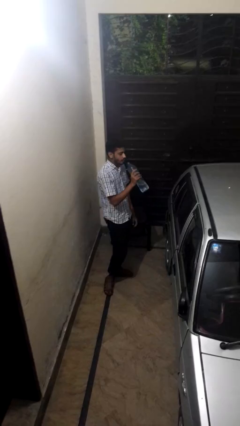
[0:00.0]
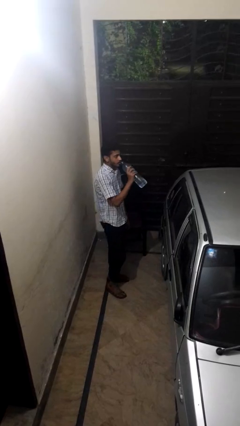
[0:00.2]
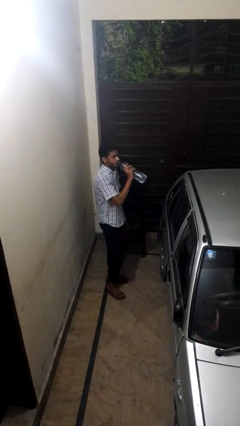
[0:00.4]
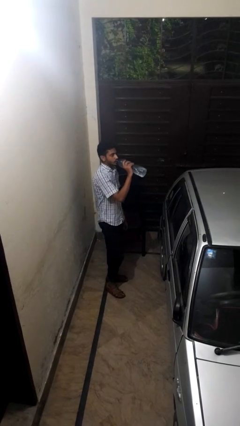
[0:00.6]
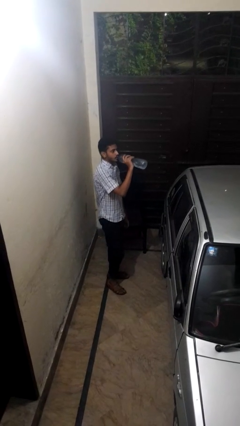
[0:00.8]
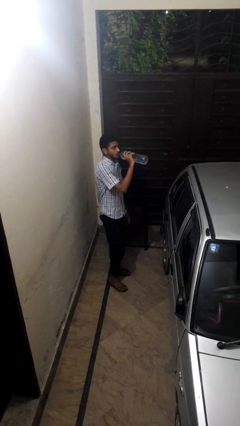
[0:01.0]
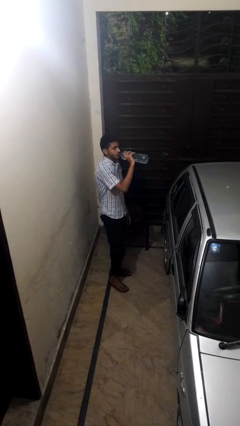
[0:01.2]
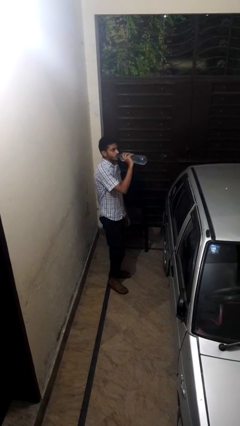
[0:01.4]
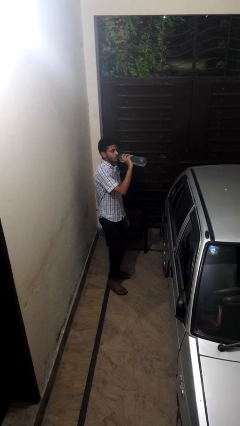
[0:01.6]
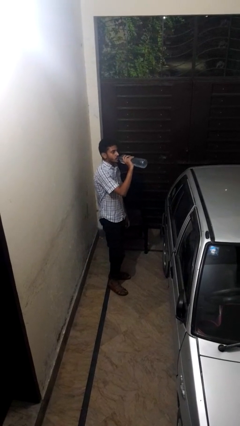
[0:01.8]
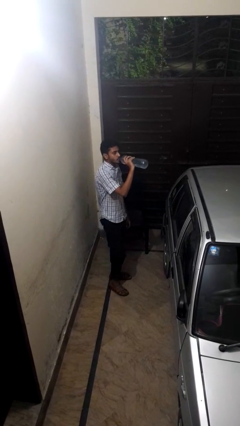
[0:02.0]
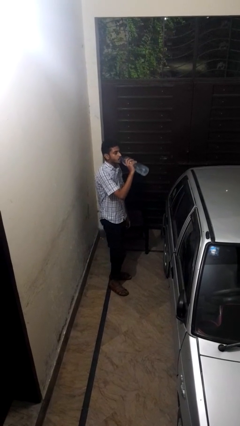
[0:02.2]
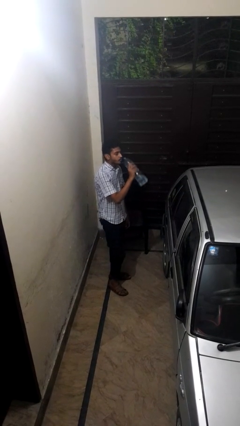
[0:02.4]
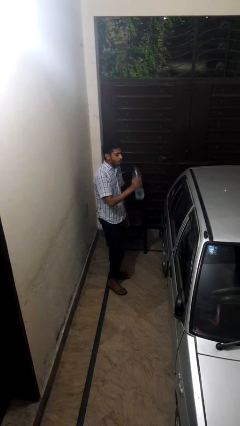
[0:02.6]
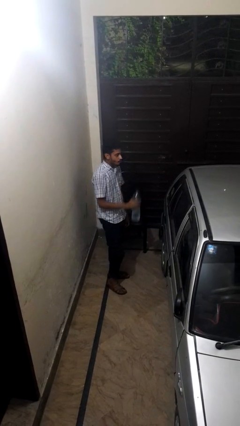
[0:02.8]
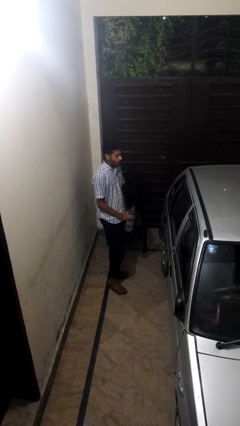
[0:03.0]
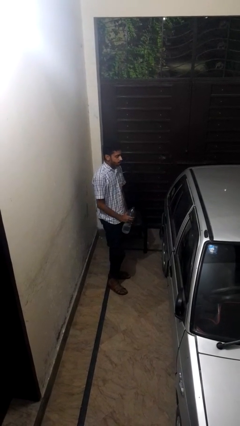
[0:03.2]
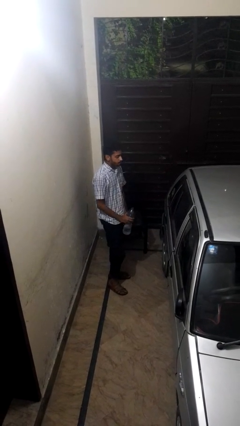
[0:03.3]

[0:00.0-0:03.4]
person drinks from bottle

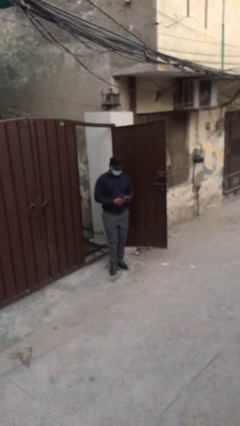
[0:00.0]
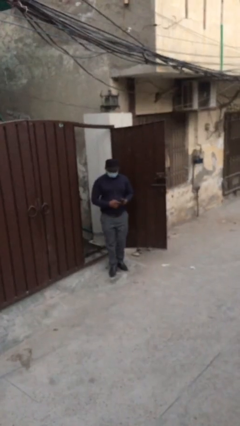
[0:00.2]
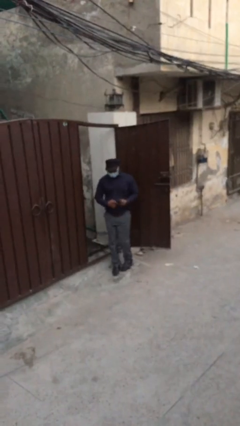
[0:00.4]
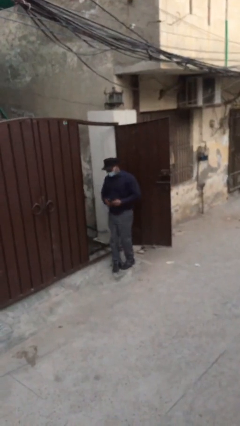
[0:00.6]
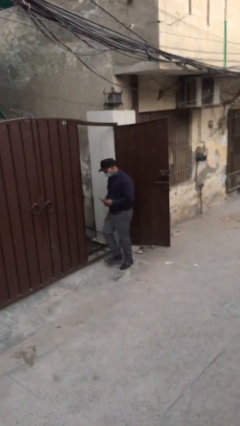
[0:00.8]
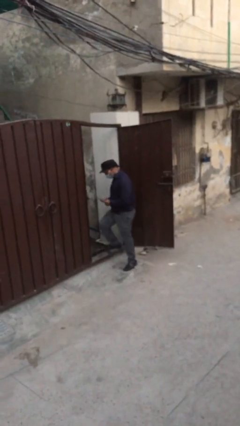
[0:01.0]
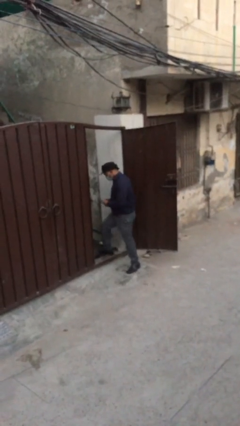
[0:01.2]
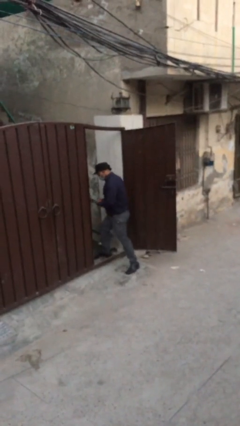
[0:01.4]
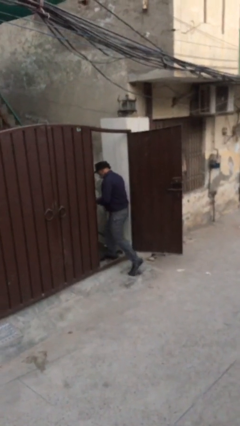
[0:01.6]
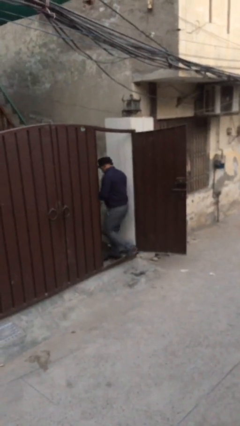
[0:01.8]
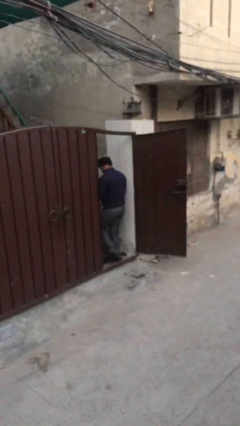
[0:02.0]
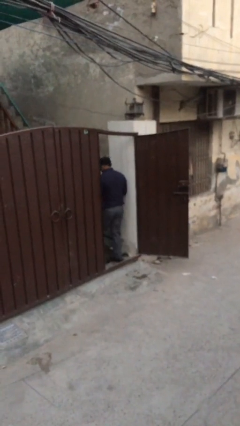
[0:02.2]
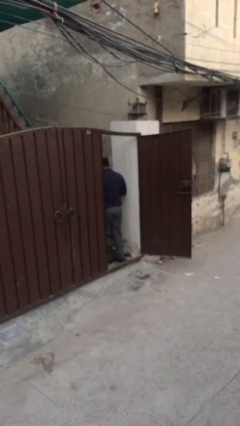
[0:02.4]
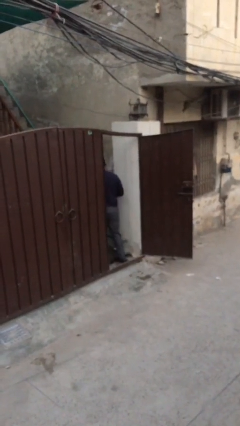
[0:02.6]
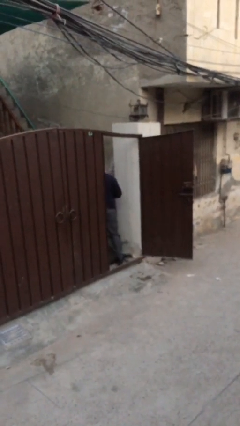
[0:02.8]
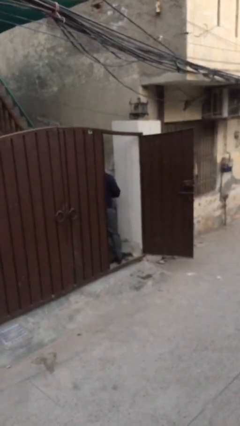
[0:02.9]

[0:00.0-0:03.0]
person exits scene through structure

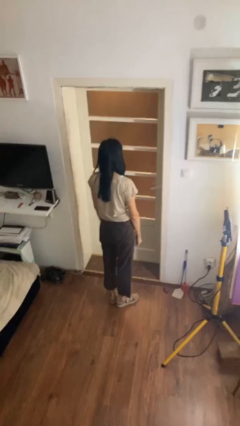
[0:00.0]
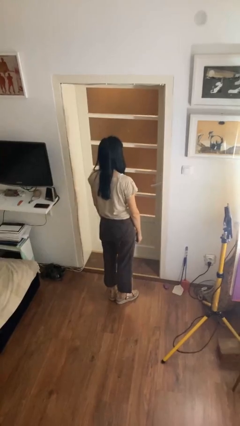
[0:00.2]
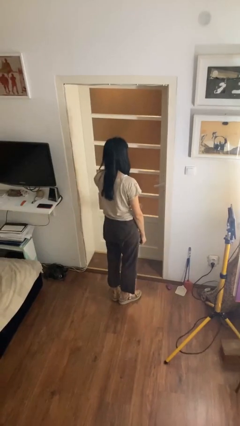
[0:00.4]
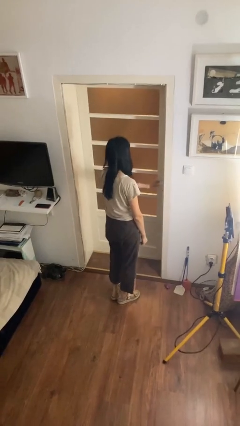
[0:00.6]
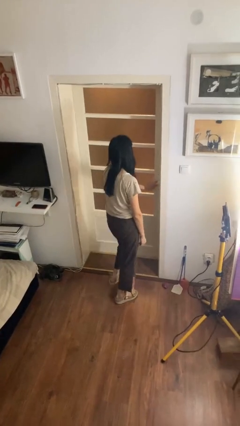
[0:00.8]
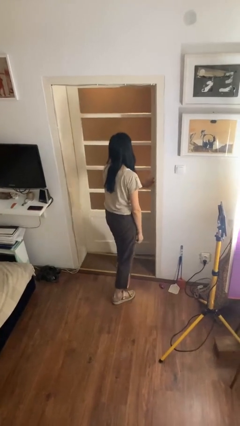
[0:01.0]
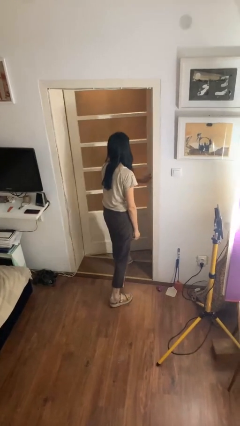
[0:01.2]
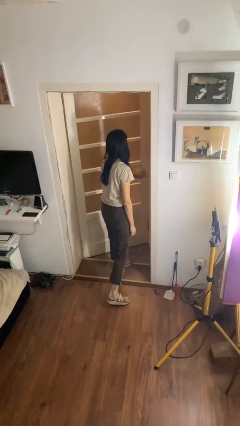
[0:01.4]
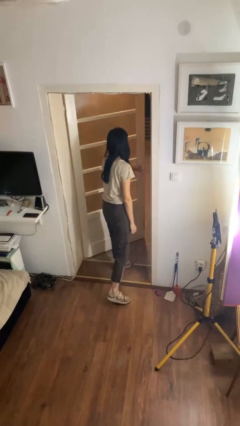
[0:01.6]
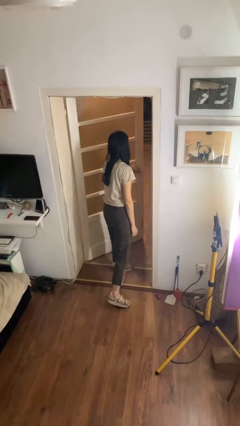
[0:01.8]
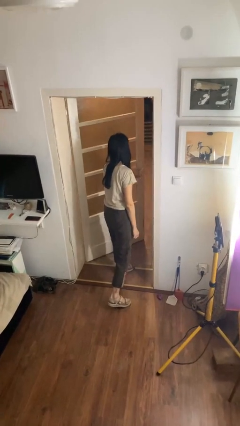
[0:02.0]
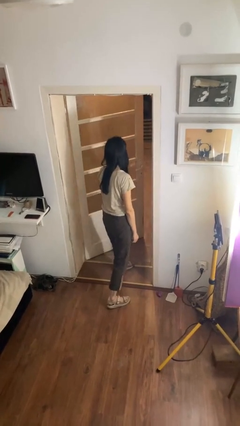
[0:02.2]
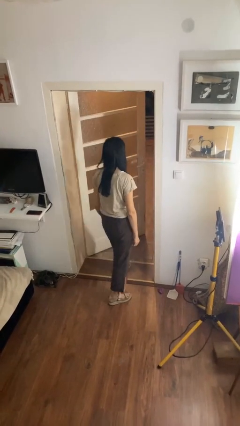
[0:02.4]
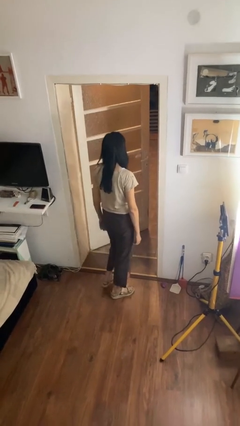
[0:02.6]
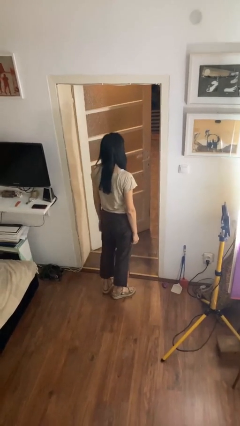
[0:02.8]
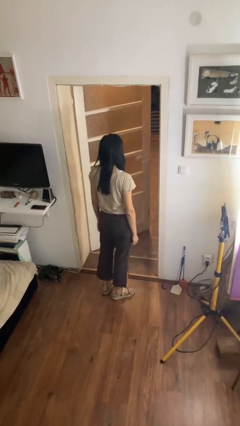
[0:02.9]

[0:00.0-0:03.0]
person opens facility door

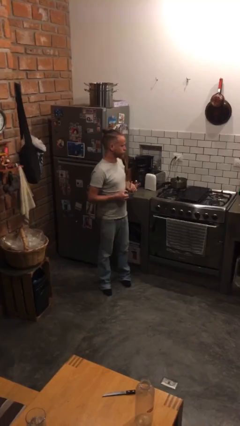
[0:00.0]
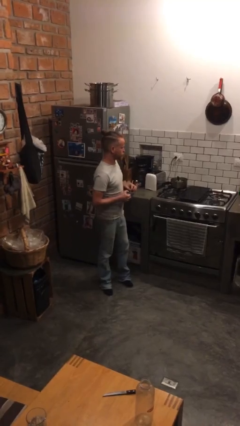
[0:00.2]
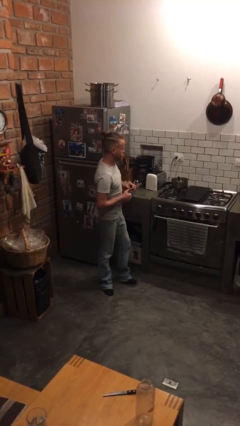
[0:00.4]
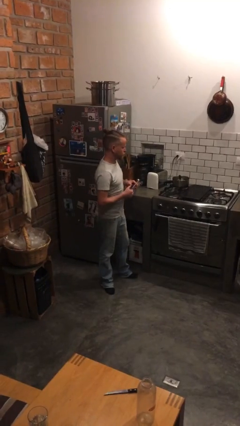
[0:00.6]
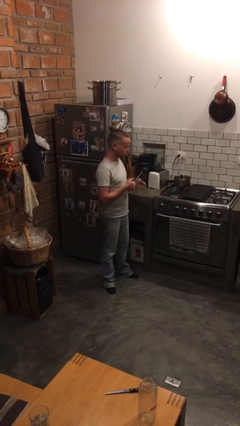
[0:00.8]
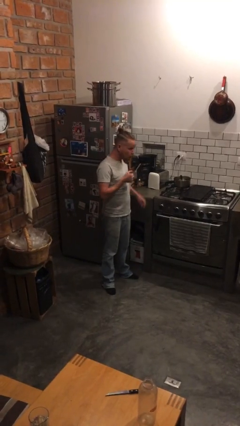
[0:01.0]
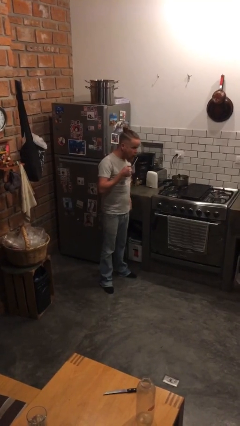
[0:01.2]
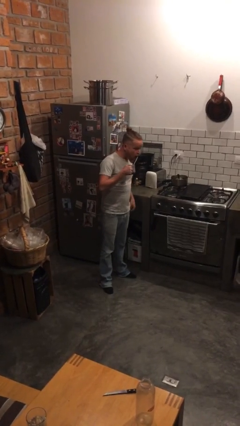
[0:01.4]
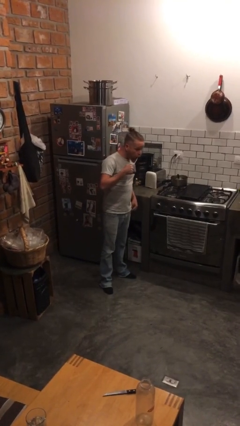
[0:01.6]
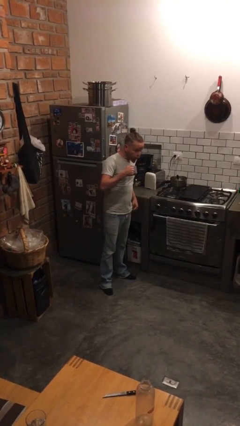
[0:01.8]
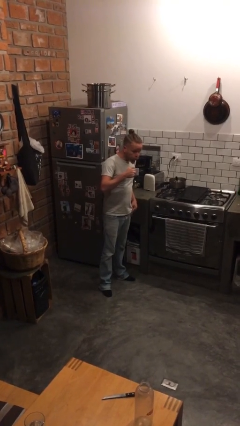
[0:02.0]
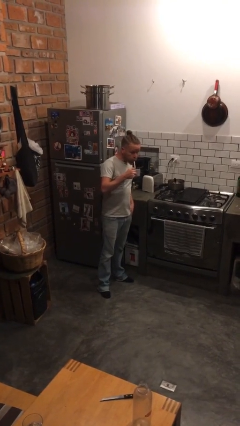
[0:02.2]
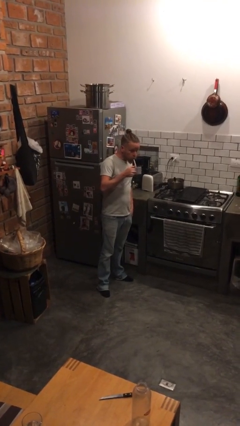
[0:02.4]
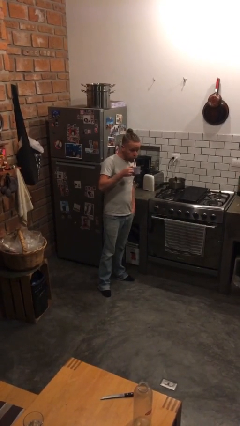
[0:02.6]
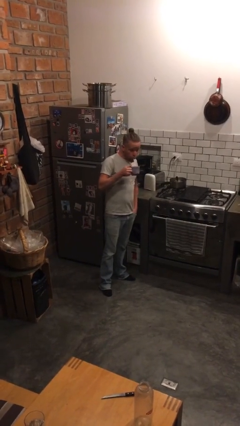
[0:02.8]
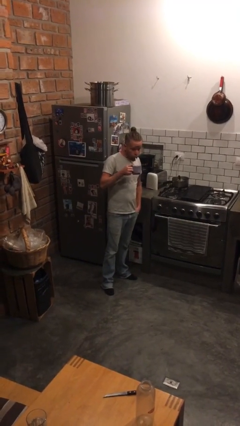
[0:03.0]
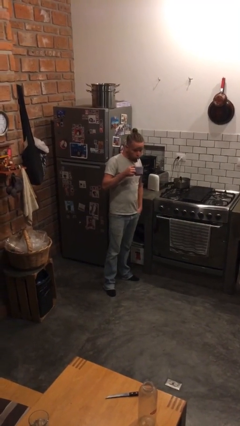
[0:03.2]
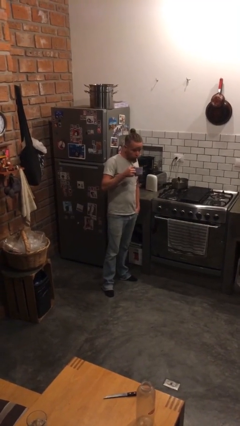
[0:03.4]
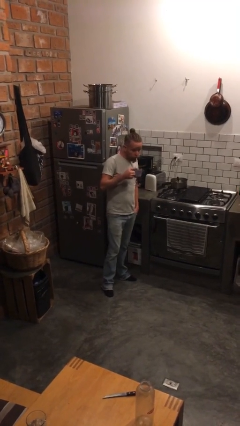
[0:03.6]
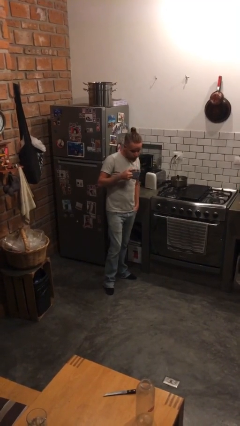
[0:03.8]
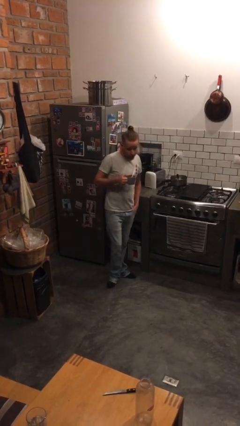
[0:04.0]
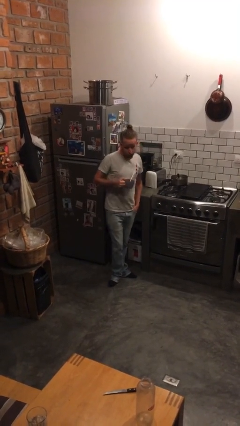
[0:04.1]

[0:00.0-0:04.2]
person drinks from straw

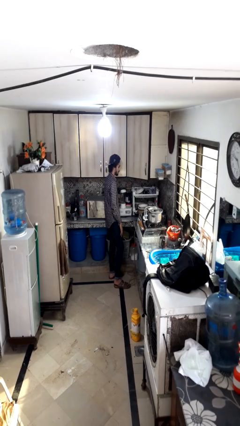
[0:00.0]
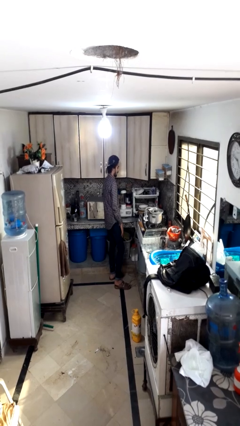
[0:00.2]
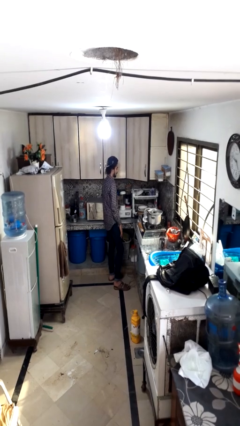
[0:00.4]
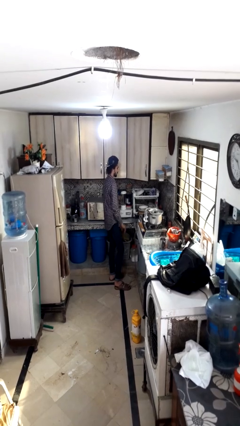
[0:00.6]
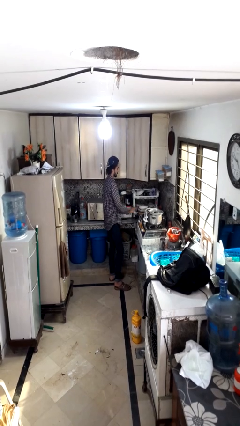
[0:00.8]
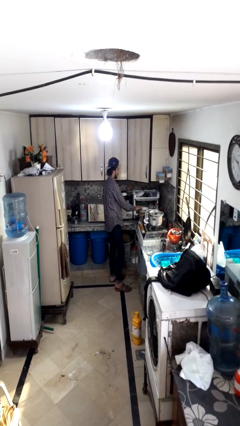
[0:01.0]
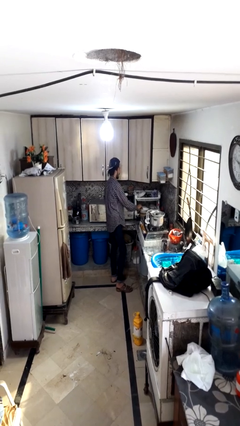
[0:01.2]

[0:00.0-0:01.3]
person loads dishwasher

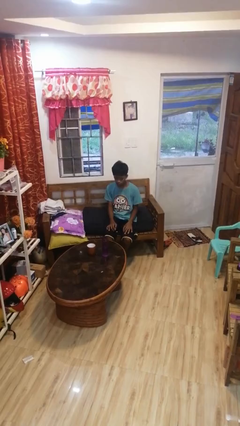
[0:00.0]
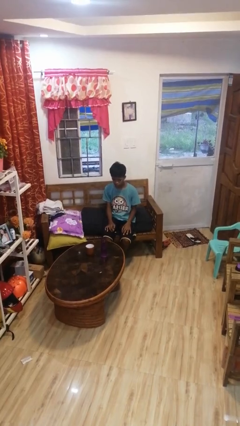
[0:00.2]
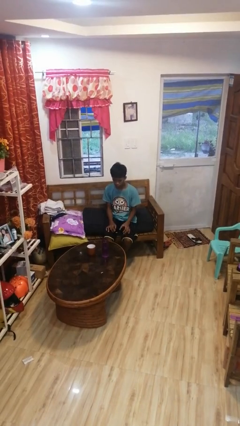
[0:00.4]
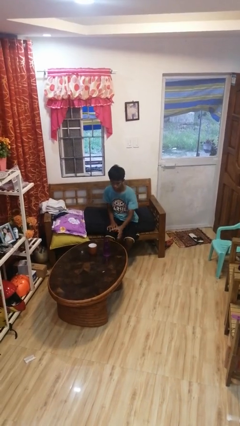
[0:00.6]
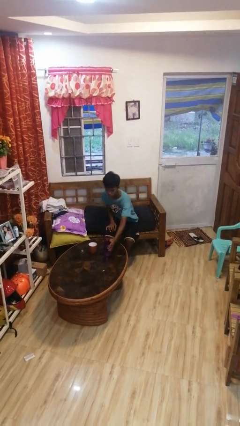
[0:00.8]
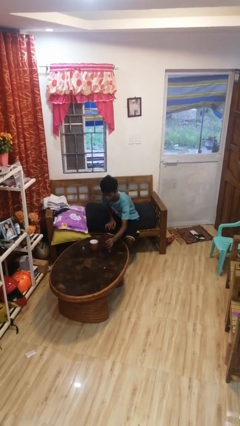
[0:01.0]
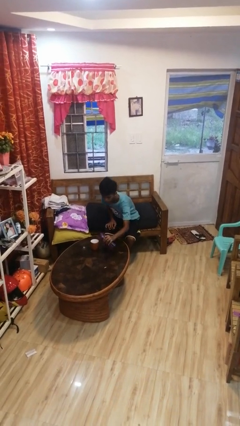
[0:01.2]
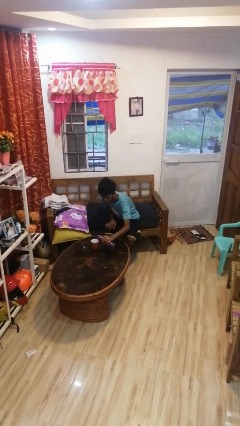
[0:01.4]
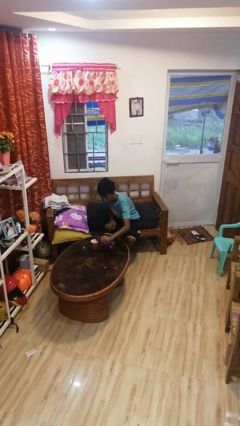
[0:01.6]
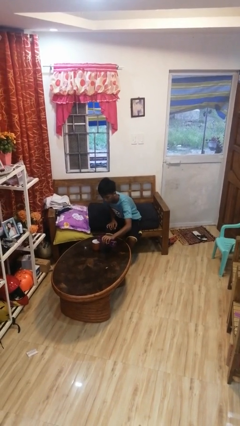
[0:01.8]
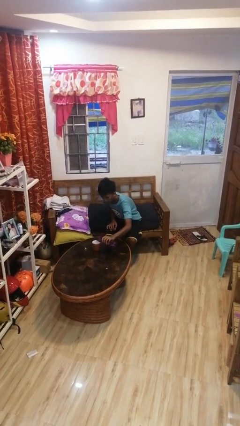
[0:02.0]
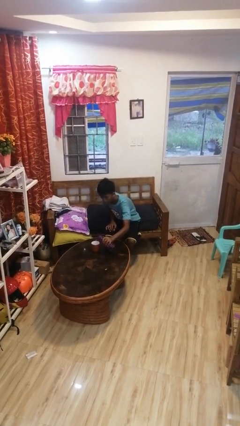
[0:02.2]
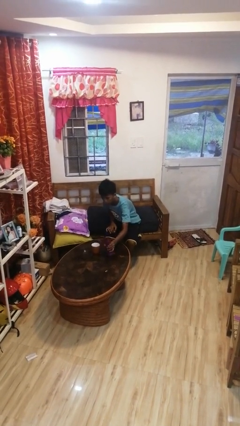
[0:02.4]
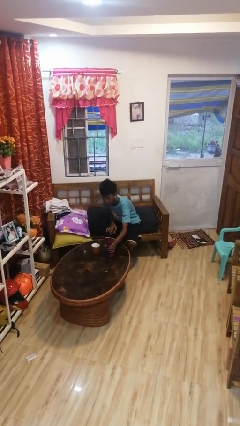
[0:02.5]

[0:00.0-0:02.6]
person pours liquid into cup
